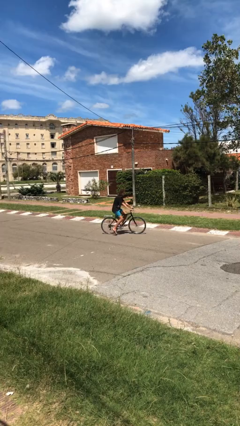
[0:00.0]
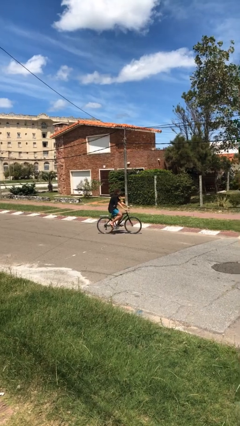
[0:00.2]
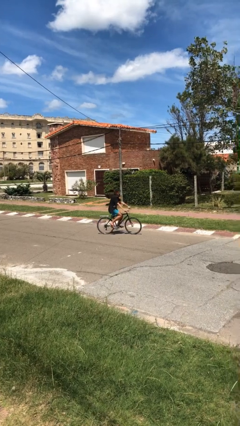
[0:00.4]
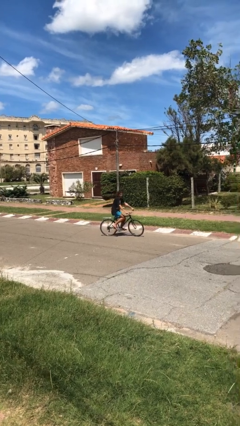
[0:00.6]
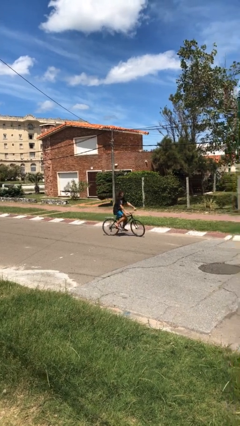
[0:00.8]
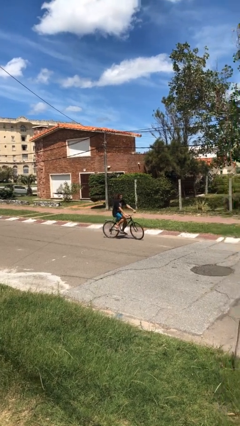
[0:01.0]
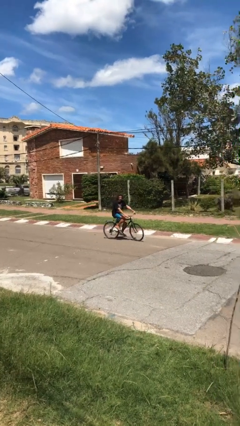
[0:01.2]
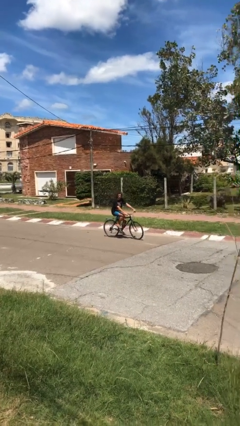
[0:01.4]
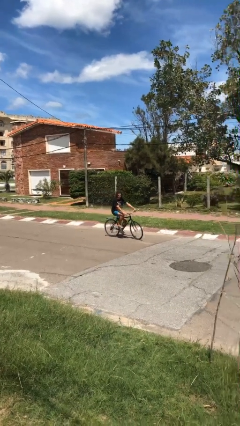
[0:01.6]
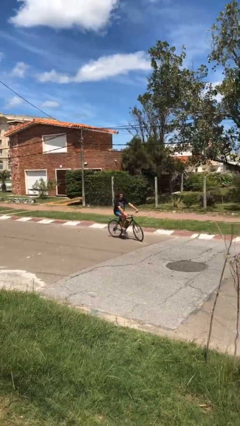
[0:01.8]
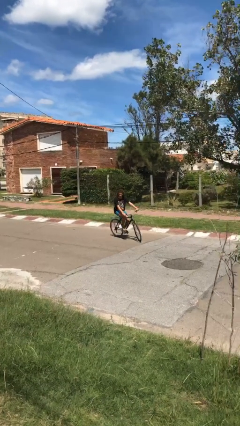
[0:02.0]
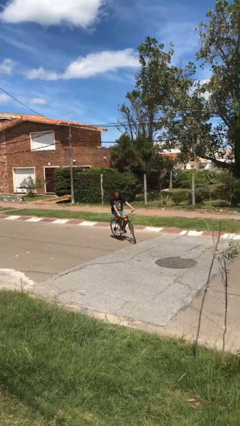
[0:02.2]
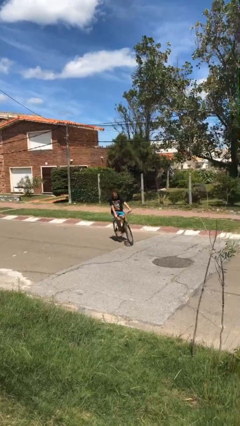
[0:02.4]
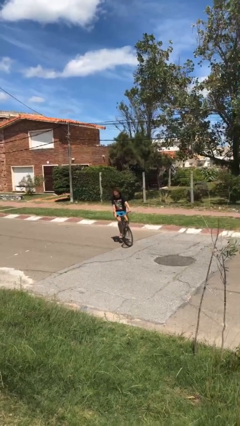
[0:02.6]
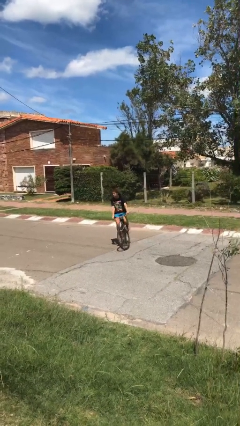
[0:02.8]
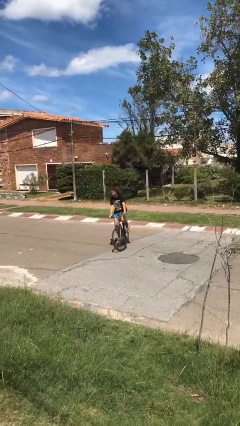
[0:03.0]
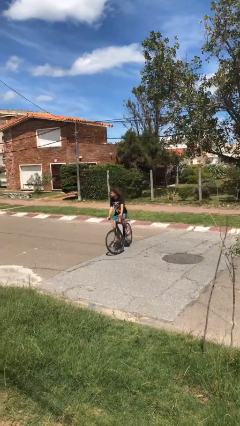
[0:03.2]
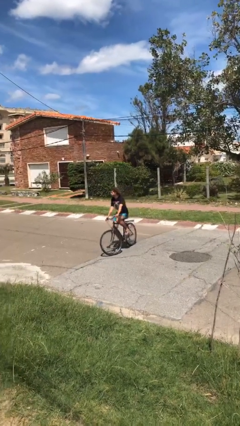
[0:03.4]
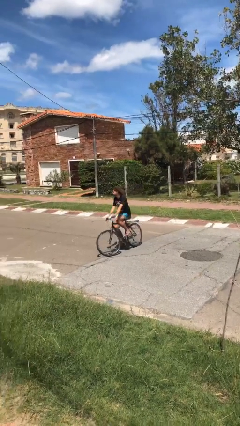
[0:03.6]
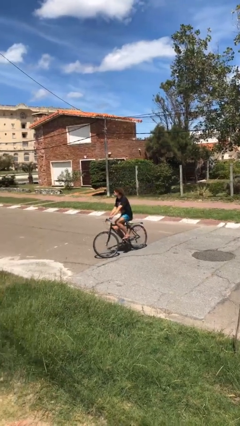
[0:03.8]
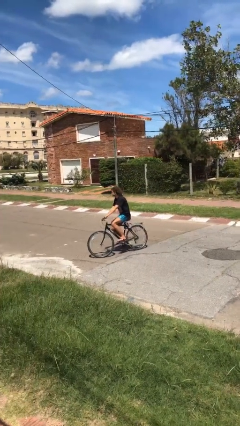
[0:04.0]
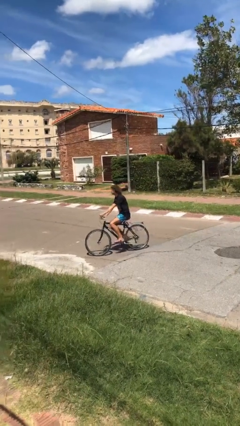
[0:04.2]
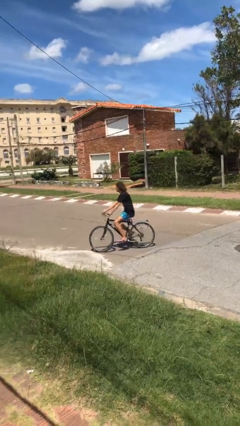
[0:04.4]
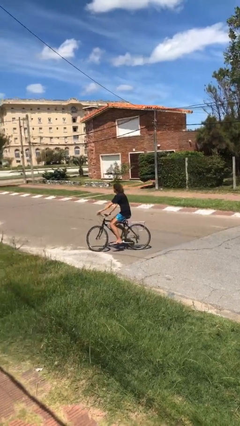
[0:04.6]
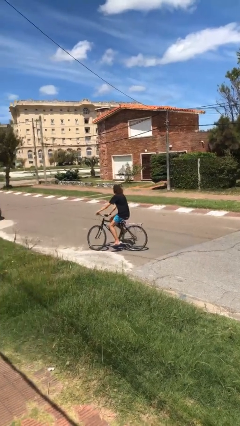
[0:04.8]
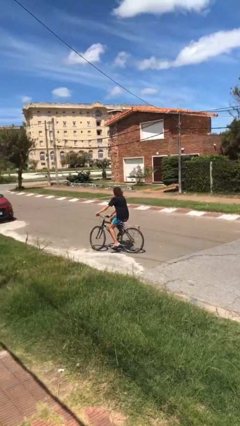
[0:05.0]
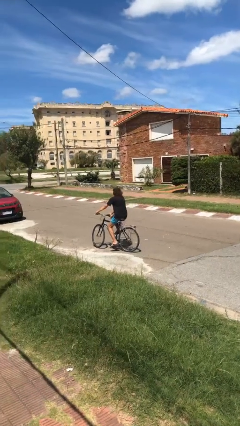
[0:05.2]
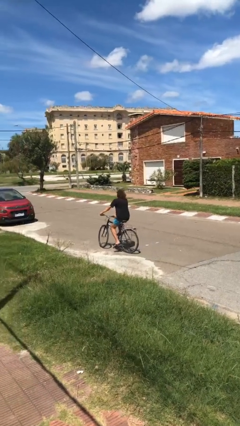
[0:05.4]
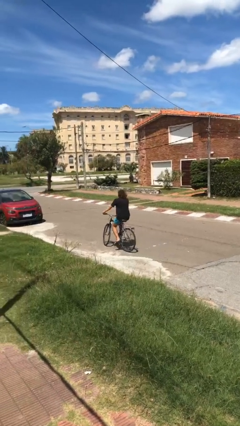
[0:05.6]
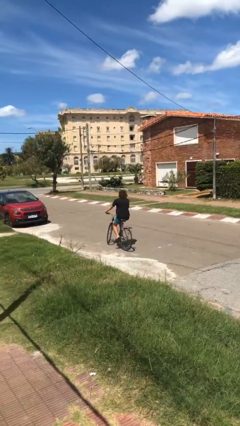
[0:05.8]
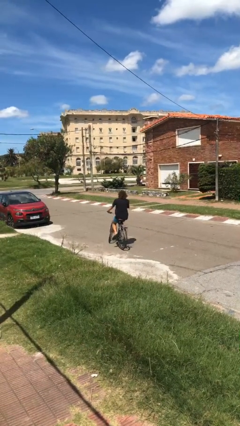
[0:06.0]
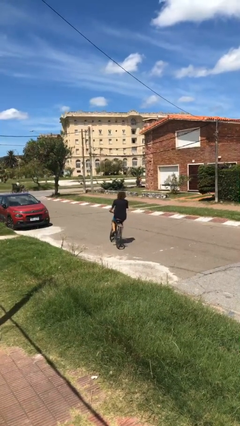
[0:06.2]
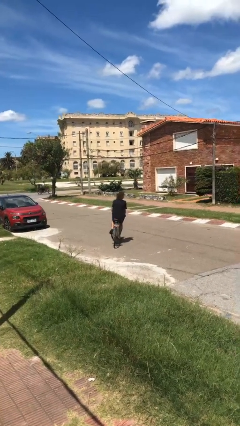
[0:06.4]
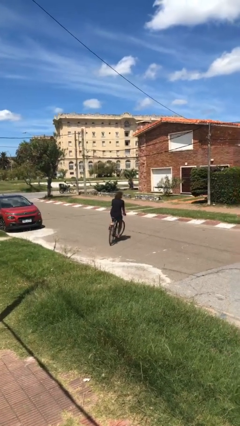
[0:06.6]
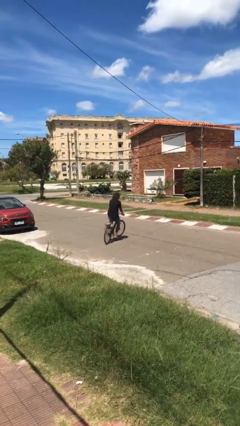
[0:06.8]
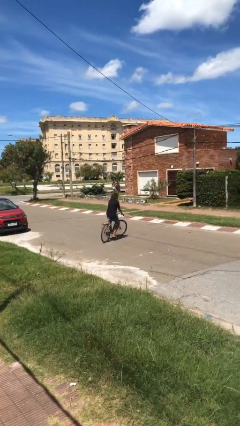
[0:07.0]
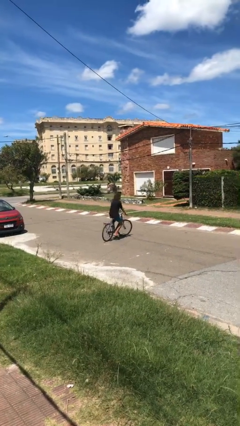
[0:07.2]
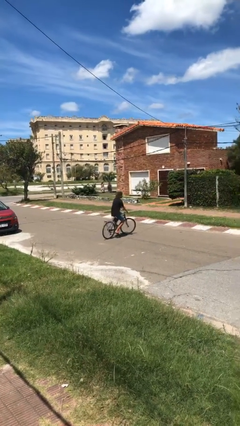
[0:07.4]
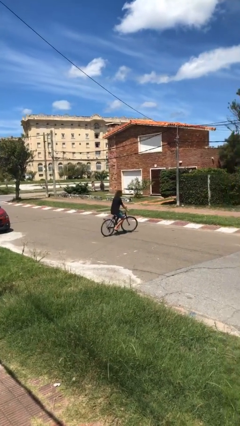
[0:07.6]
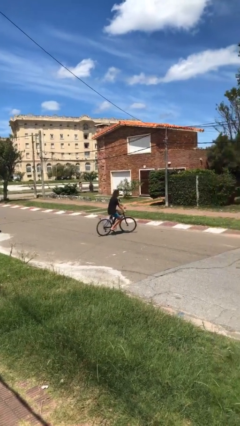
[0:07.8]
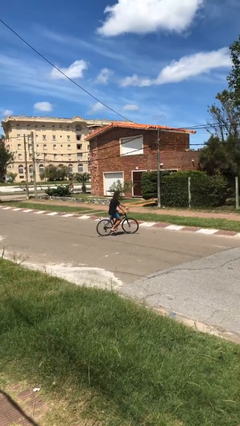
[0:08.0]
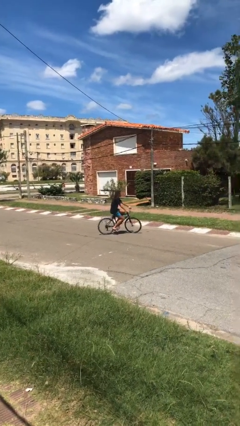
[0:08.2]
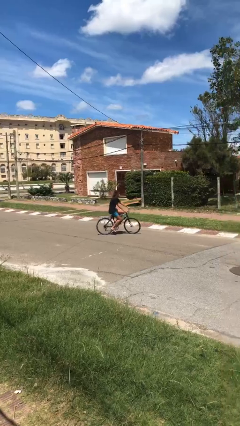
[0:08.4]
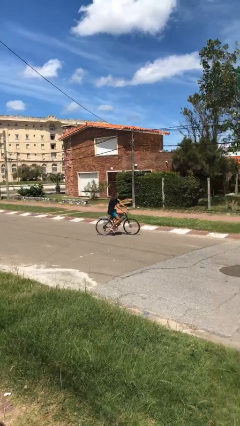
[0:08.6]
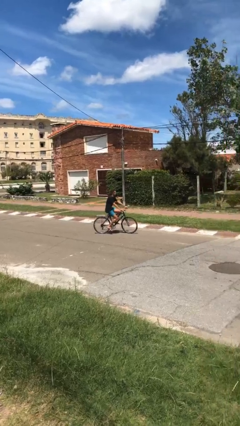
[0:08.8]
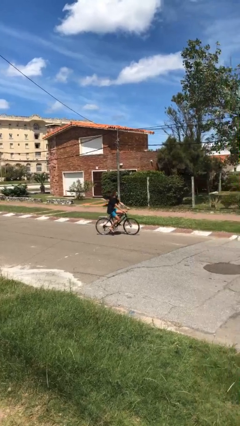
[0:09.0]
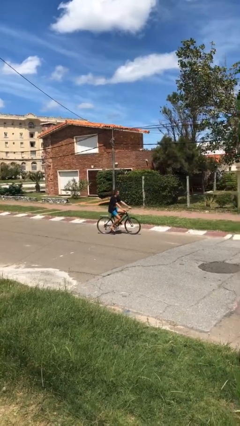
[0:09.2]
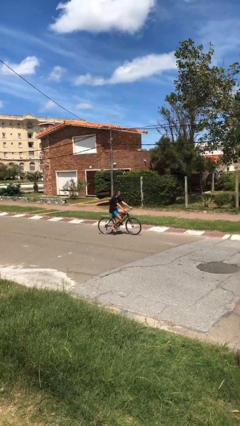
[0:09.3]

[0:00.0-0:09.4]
person rides bicycle

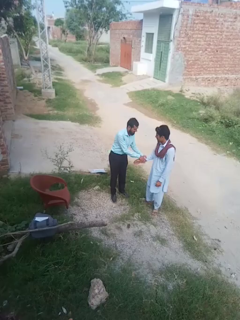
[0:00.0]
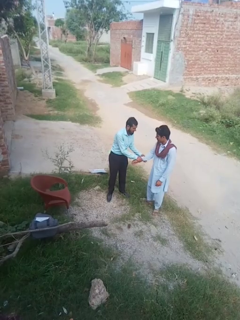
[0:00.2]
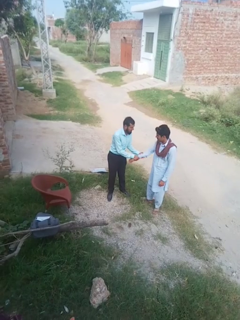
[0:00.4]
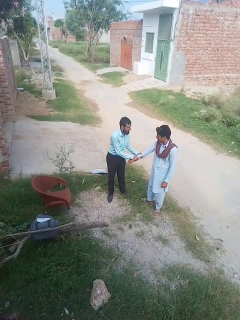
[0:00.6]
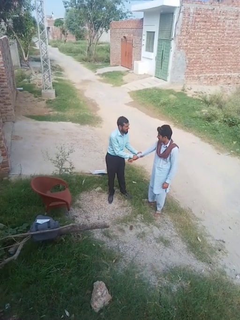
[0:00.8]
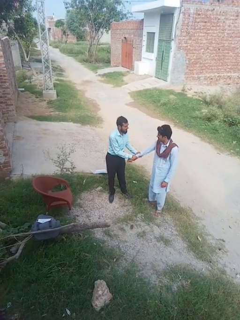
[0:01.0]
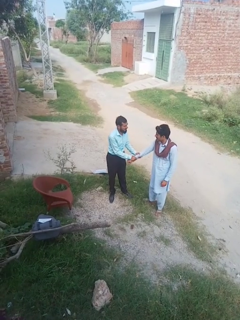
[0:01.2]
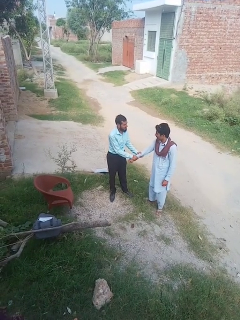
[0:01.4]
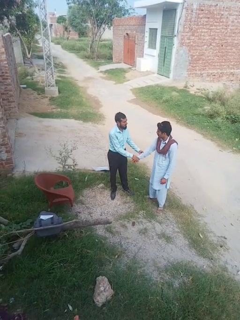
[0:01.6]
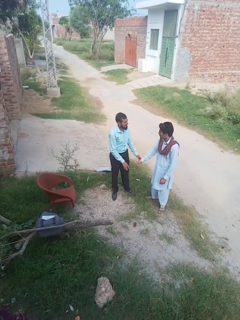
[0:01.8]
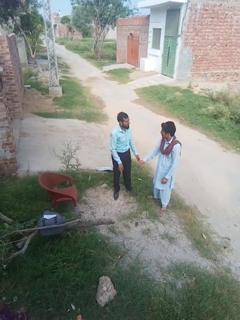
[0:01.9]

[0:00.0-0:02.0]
person grabs person by forearm

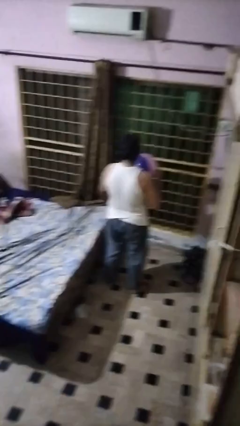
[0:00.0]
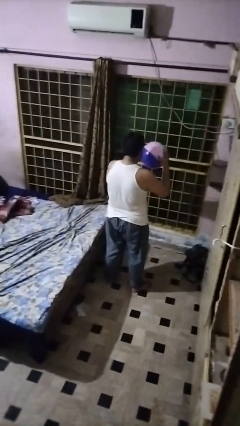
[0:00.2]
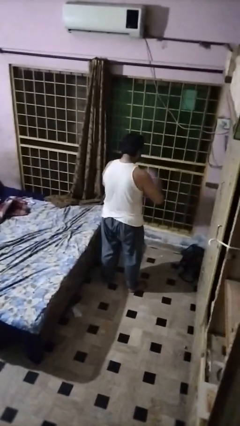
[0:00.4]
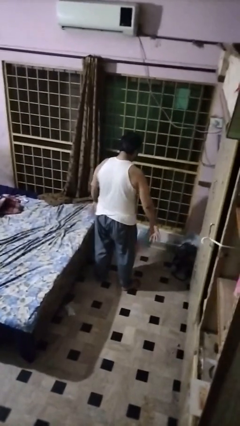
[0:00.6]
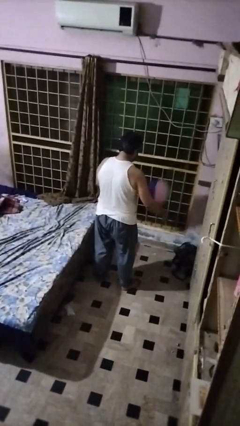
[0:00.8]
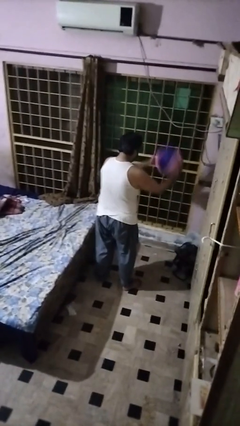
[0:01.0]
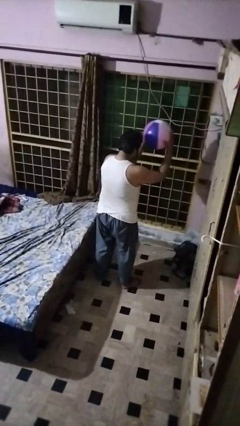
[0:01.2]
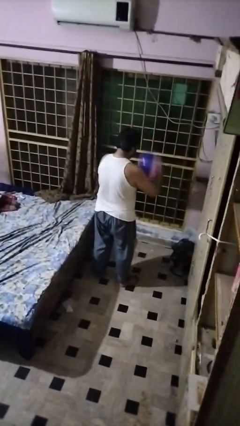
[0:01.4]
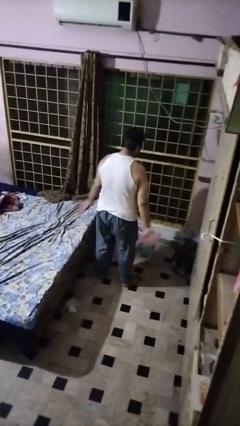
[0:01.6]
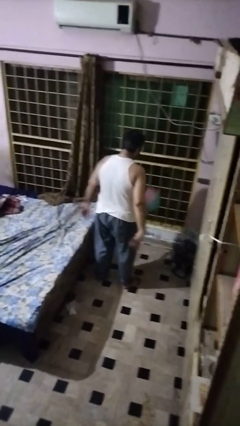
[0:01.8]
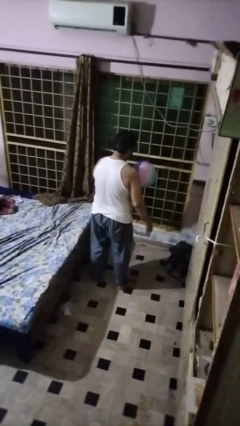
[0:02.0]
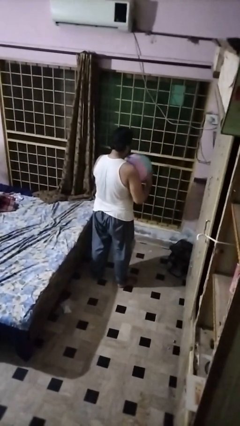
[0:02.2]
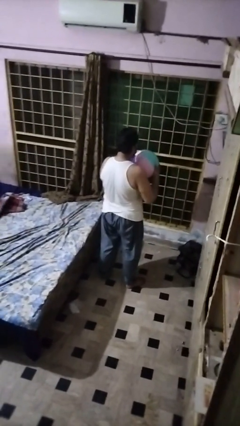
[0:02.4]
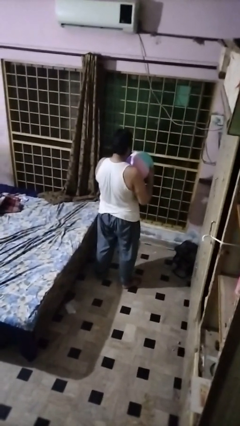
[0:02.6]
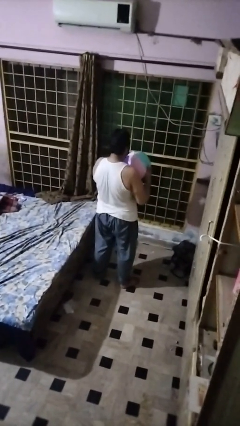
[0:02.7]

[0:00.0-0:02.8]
person bounces ball on floor

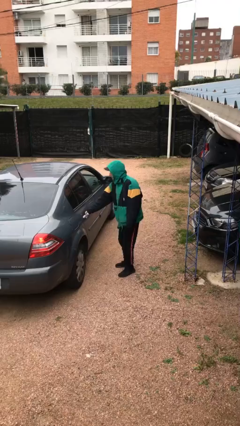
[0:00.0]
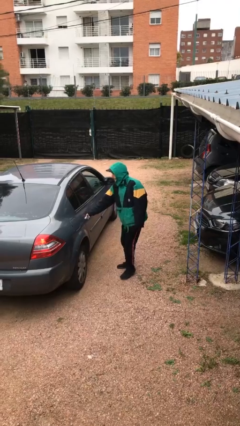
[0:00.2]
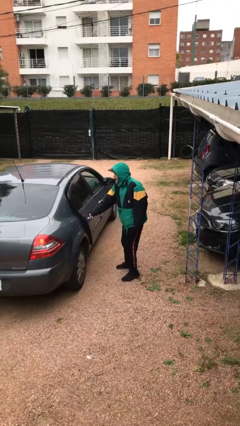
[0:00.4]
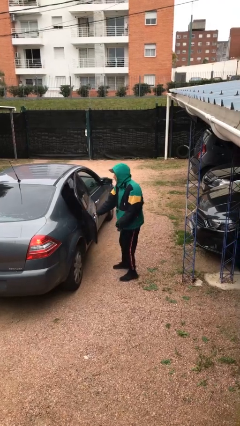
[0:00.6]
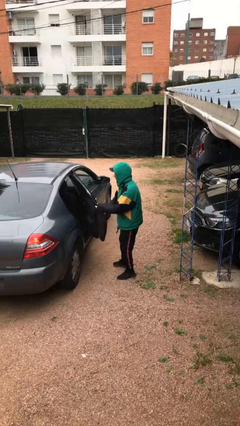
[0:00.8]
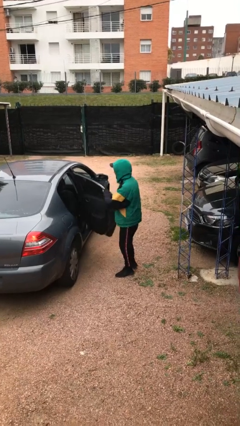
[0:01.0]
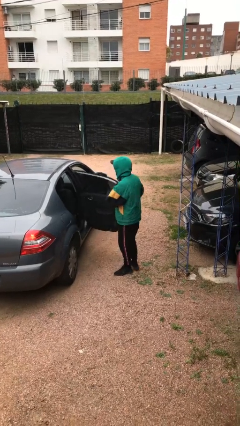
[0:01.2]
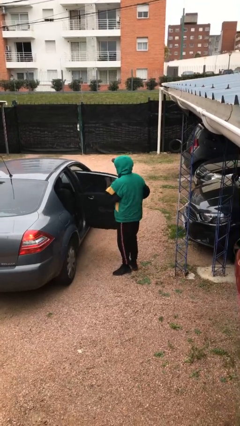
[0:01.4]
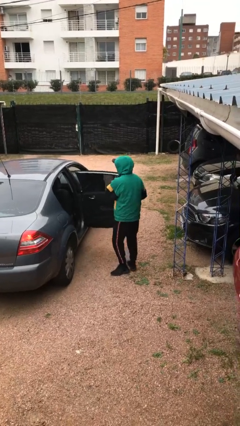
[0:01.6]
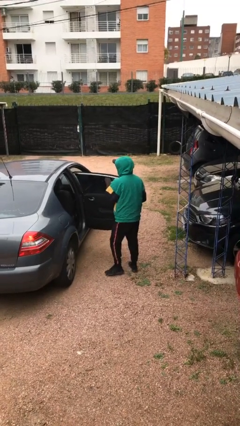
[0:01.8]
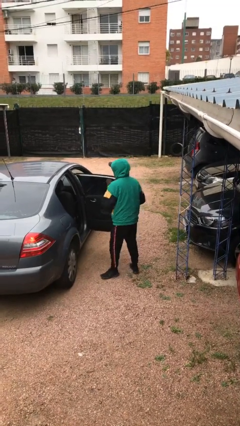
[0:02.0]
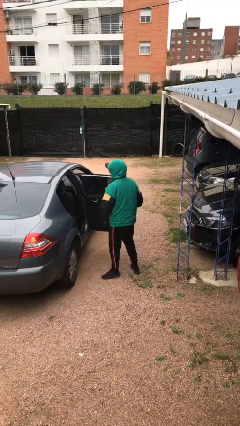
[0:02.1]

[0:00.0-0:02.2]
person opens car door

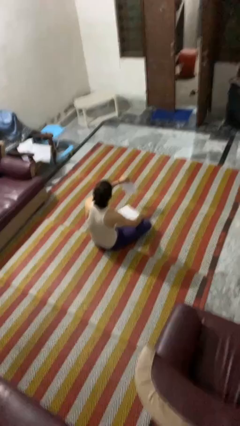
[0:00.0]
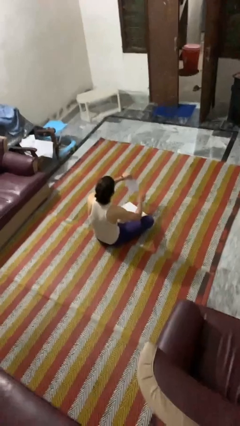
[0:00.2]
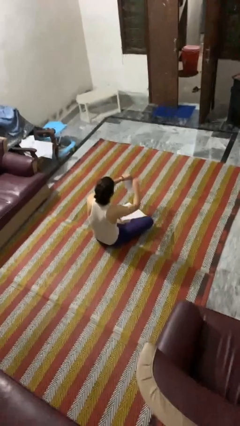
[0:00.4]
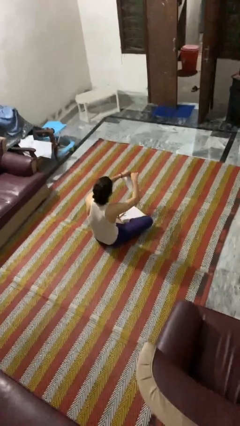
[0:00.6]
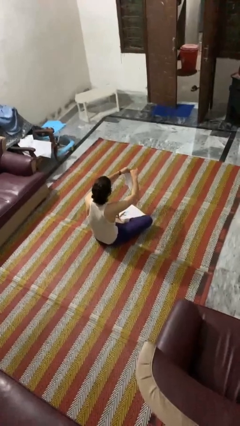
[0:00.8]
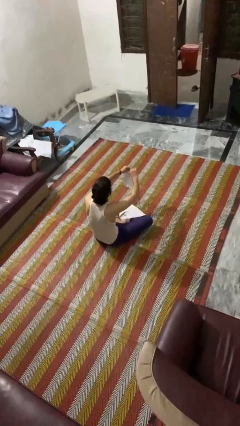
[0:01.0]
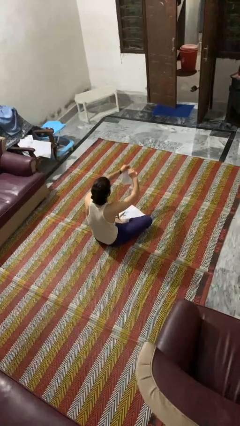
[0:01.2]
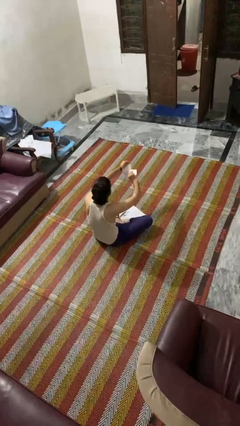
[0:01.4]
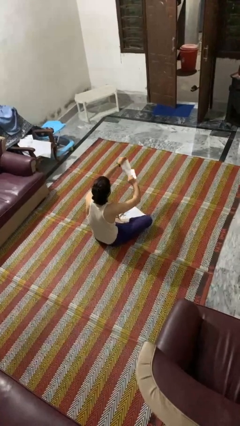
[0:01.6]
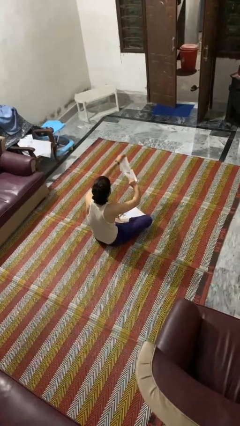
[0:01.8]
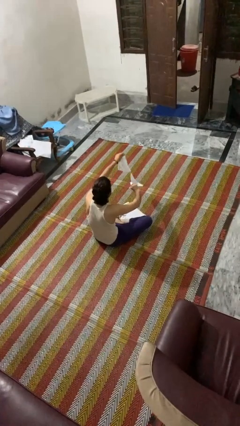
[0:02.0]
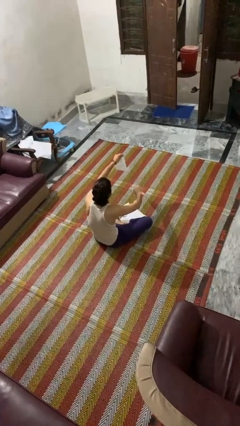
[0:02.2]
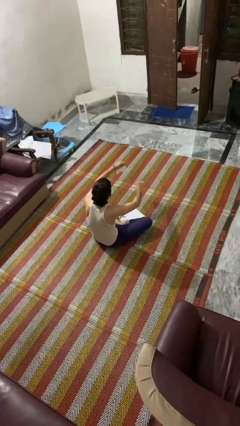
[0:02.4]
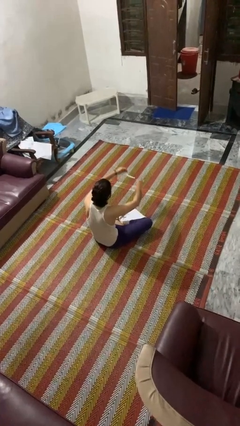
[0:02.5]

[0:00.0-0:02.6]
person tears paper
